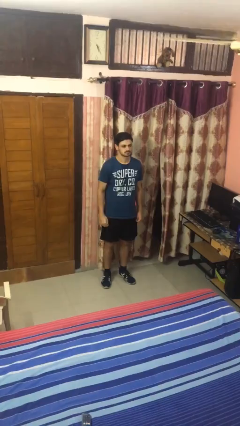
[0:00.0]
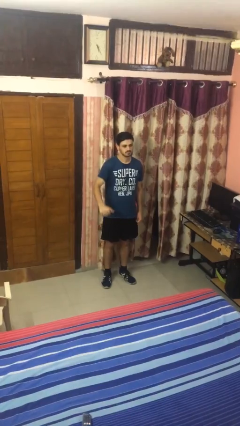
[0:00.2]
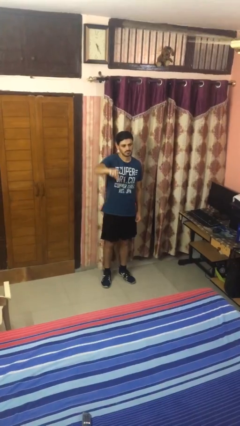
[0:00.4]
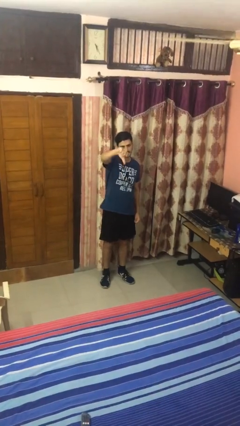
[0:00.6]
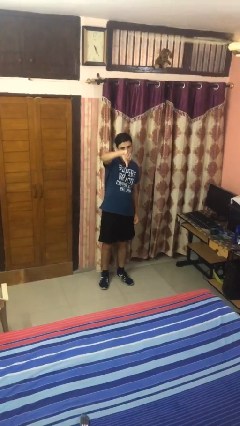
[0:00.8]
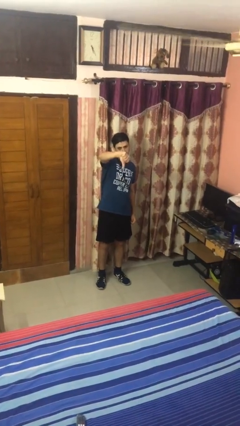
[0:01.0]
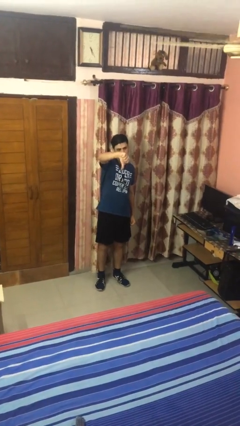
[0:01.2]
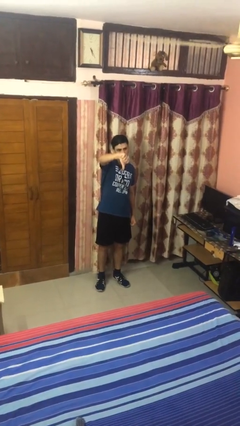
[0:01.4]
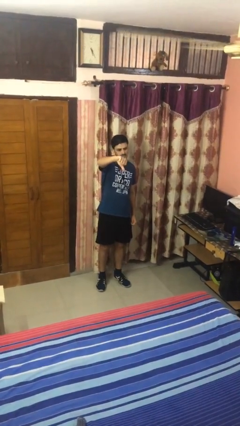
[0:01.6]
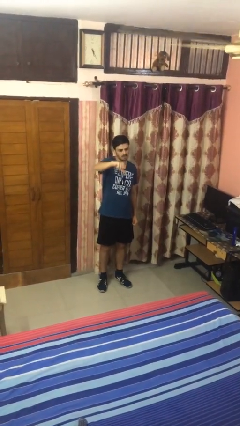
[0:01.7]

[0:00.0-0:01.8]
person gestures thumbs down

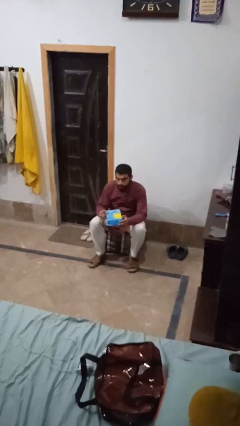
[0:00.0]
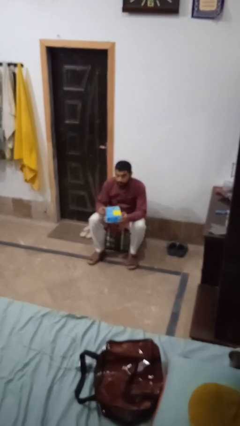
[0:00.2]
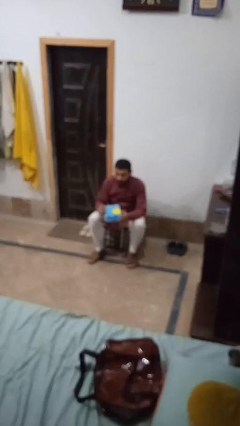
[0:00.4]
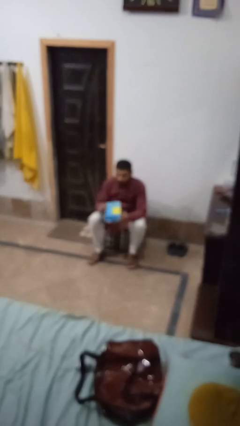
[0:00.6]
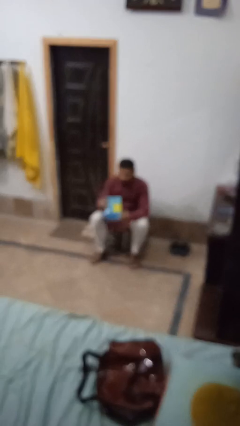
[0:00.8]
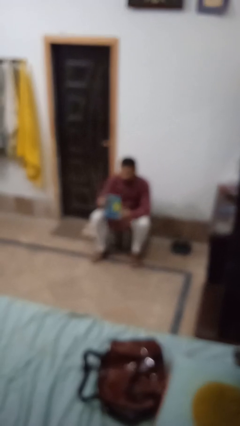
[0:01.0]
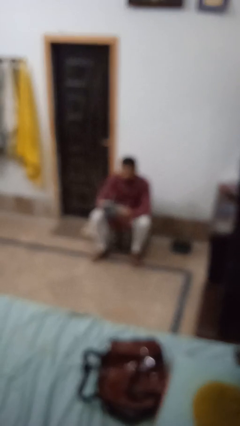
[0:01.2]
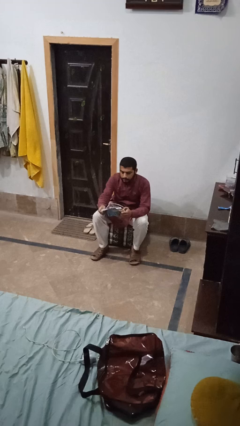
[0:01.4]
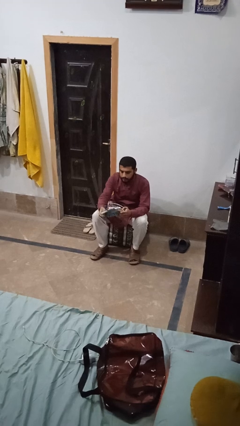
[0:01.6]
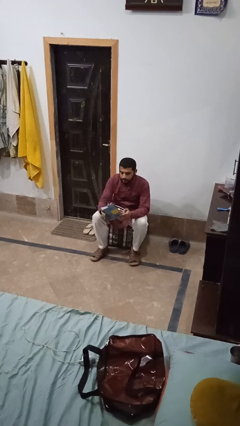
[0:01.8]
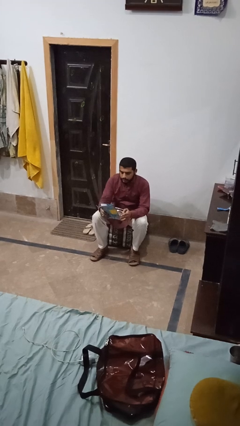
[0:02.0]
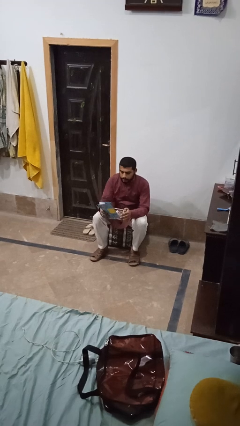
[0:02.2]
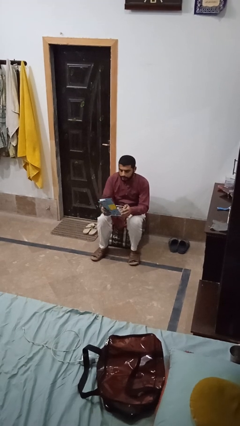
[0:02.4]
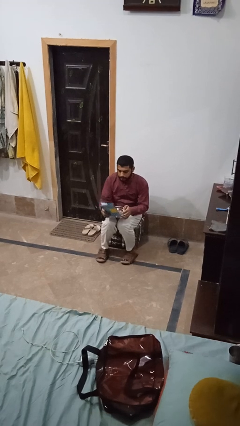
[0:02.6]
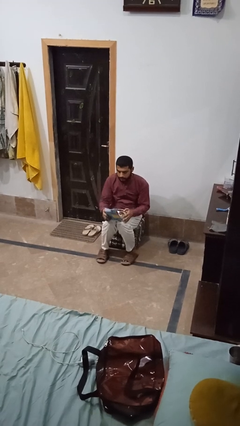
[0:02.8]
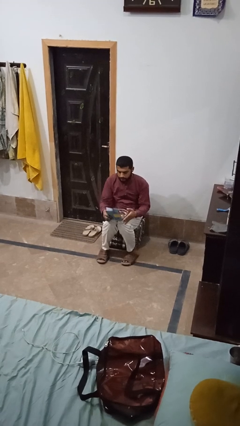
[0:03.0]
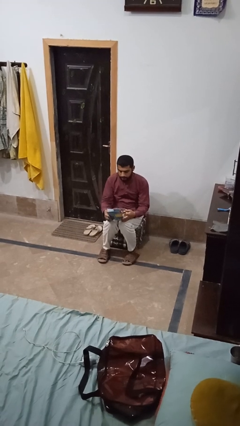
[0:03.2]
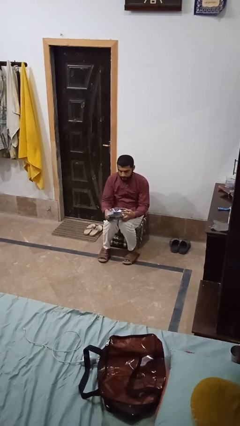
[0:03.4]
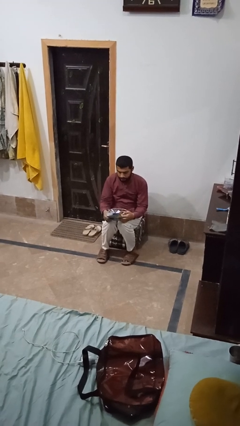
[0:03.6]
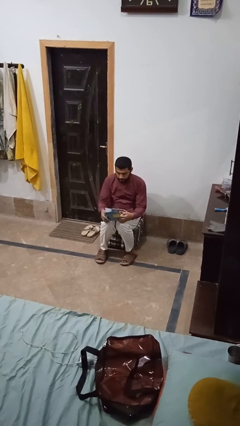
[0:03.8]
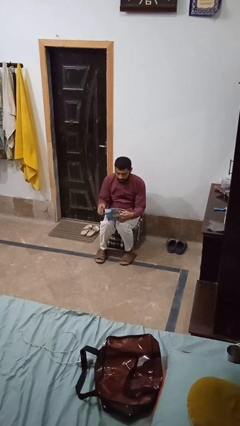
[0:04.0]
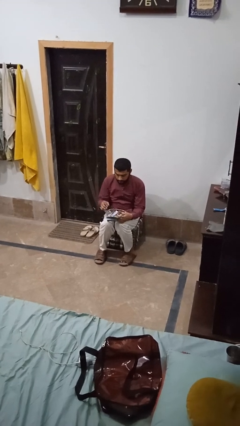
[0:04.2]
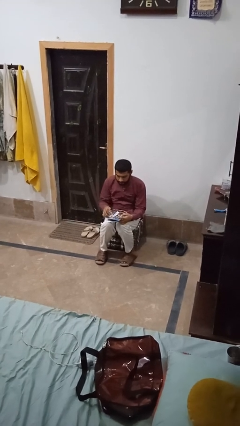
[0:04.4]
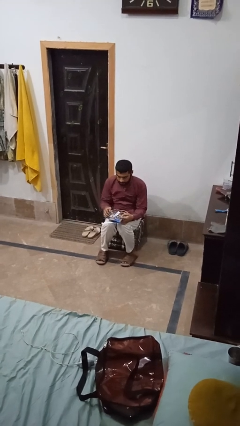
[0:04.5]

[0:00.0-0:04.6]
person opens jewelry box

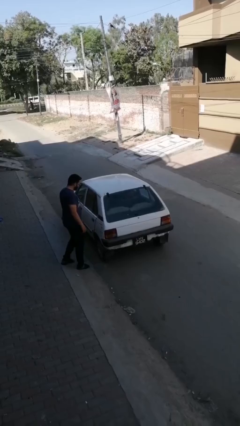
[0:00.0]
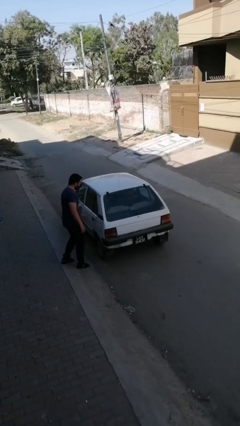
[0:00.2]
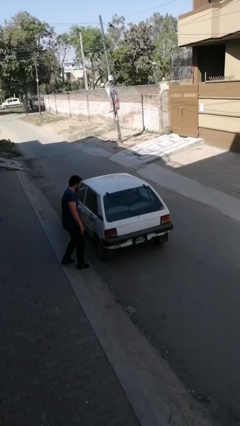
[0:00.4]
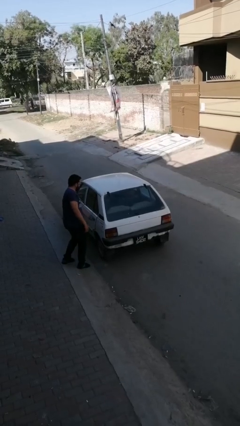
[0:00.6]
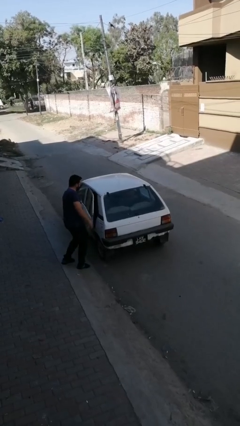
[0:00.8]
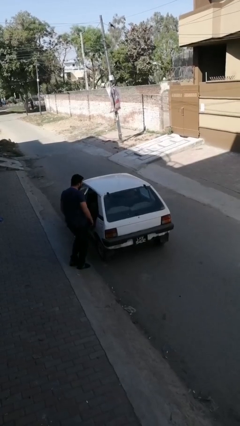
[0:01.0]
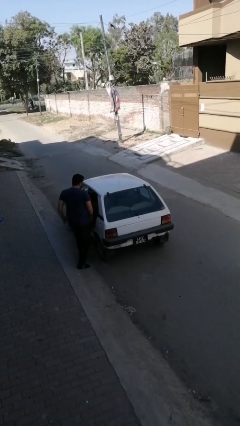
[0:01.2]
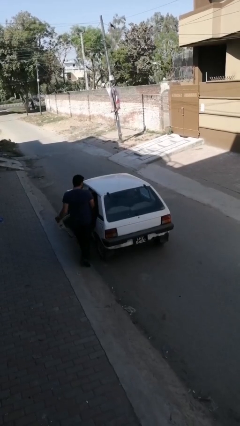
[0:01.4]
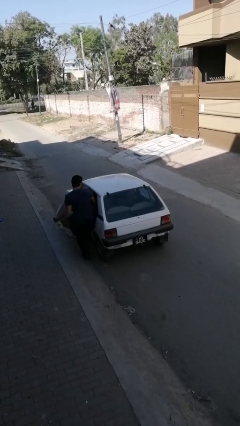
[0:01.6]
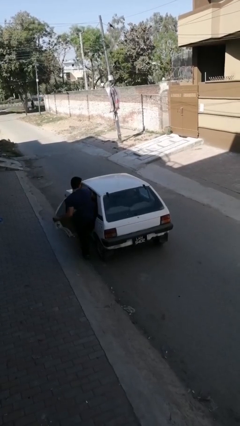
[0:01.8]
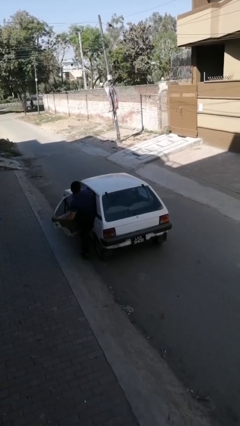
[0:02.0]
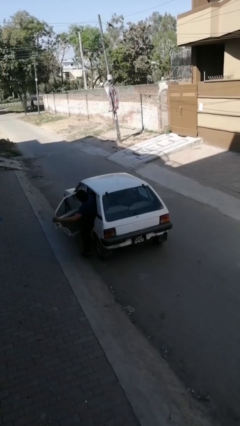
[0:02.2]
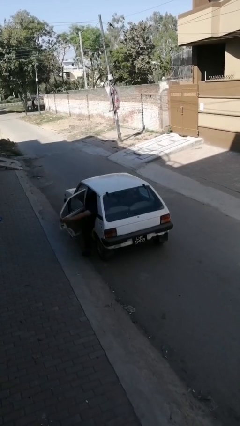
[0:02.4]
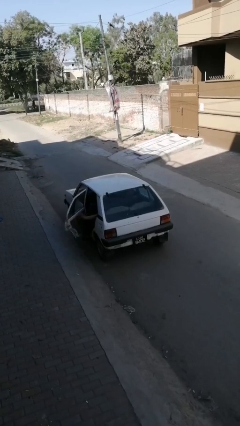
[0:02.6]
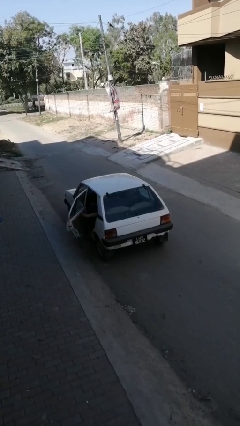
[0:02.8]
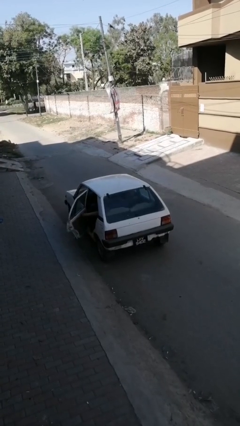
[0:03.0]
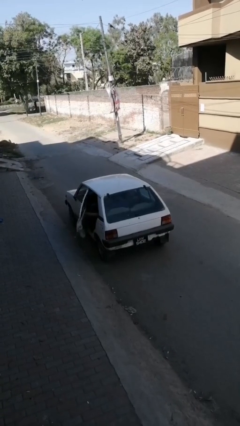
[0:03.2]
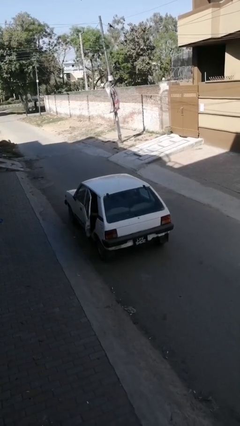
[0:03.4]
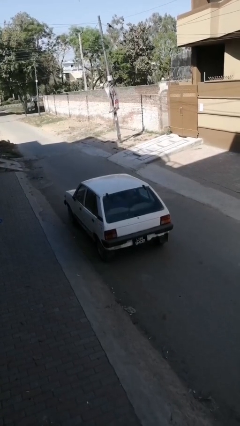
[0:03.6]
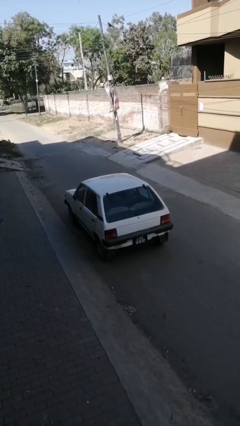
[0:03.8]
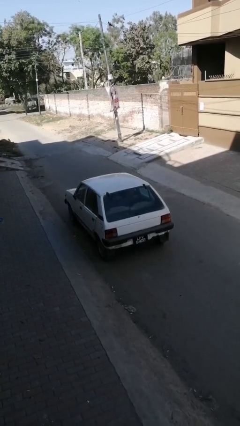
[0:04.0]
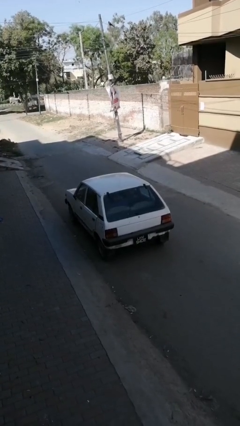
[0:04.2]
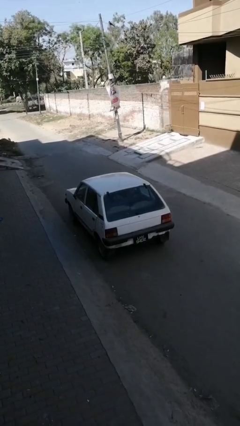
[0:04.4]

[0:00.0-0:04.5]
car picks up person

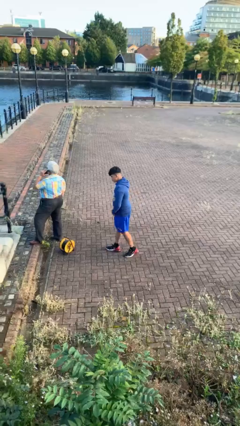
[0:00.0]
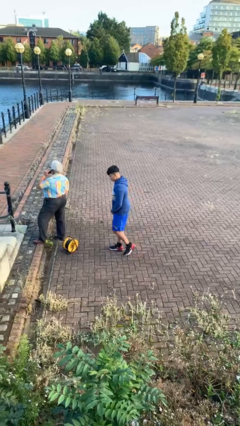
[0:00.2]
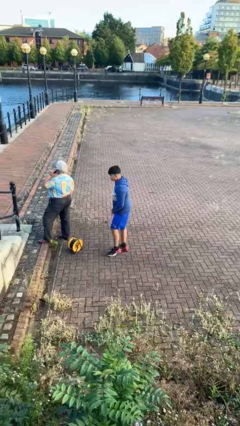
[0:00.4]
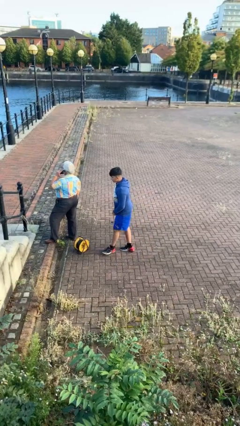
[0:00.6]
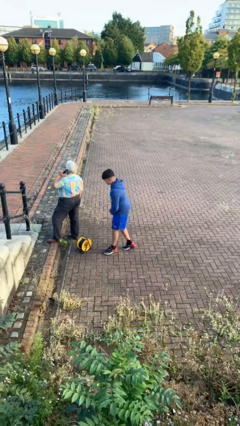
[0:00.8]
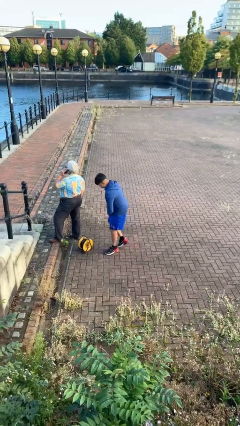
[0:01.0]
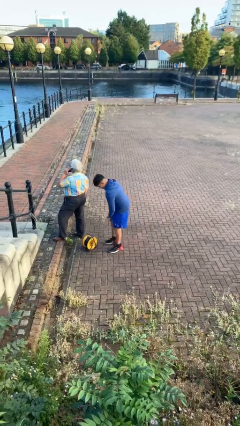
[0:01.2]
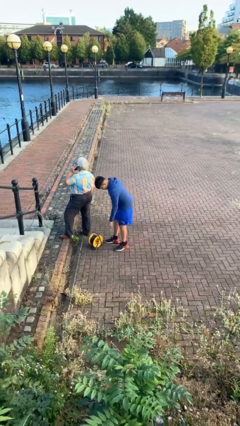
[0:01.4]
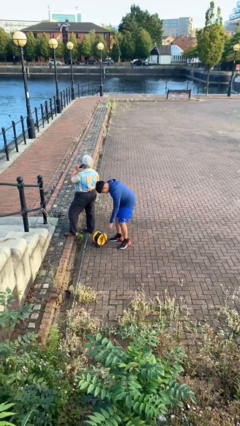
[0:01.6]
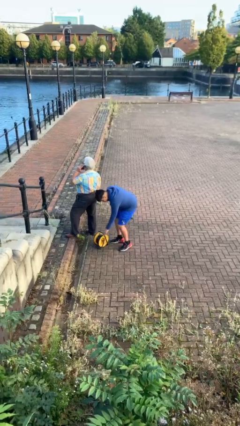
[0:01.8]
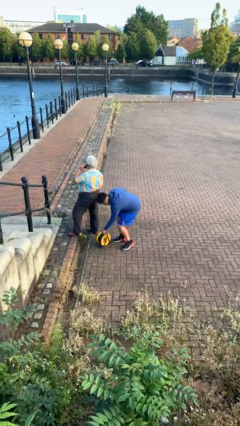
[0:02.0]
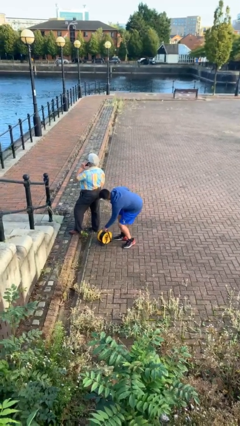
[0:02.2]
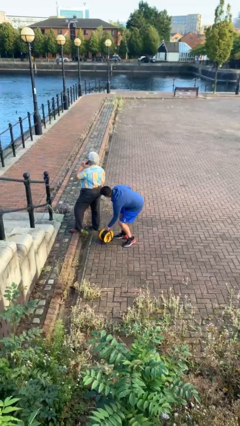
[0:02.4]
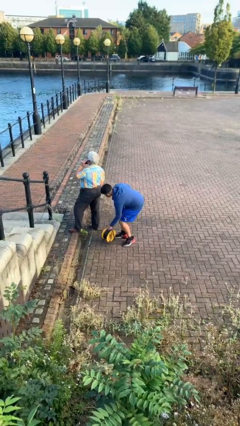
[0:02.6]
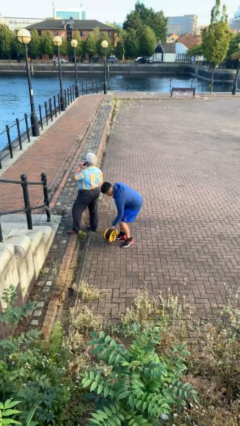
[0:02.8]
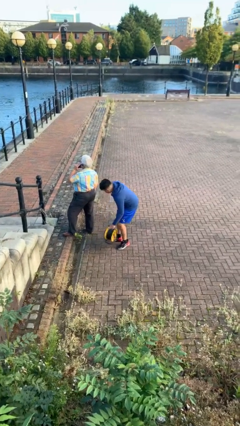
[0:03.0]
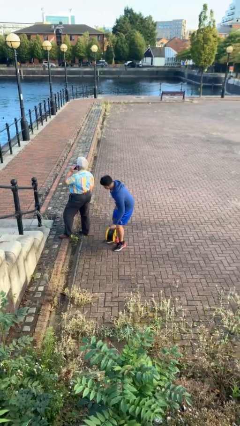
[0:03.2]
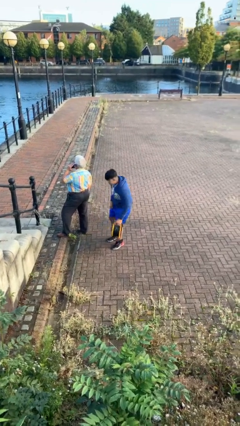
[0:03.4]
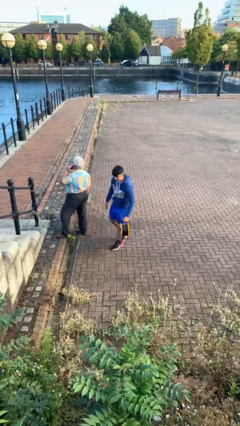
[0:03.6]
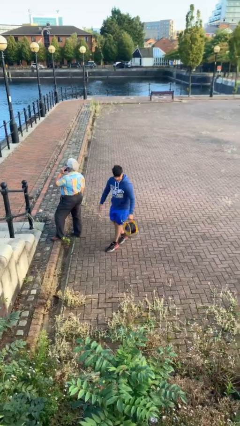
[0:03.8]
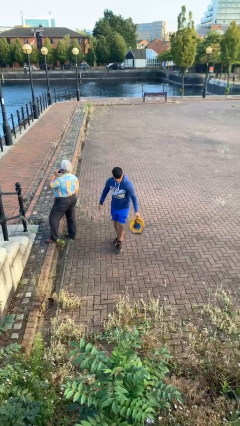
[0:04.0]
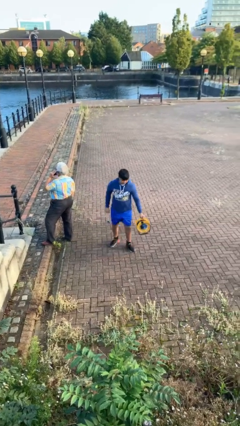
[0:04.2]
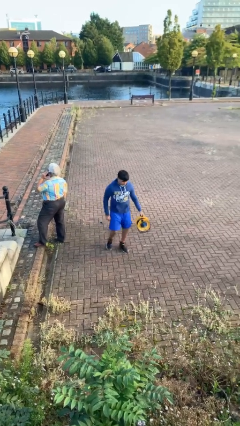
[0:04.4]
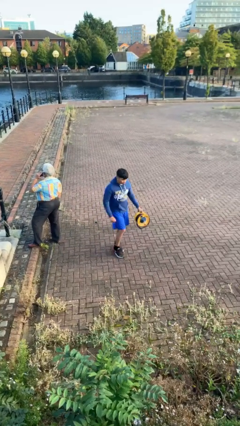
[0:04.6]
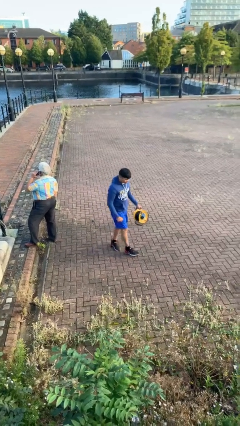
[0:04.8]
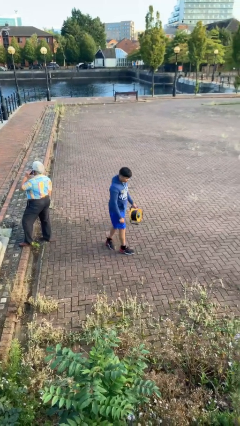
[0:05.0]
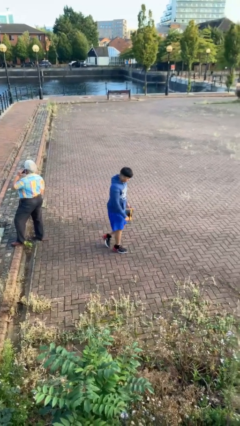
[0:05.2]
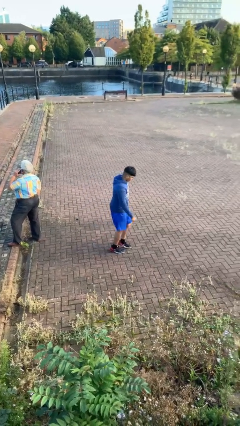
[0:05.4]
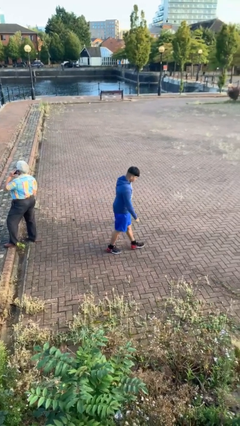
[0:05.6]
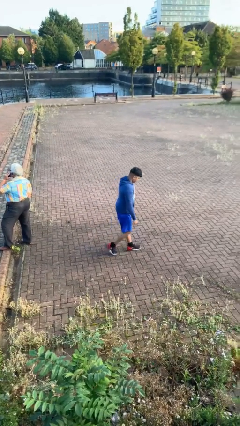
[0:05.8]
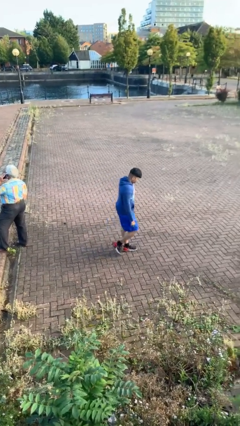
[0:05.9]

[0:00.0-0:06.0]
person steals object from person

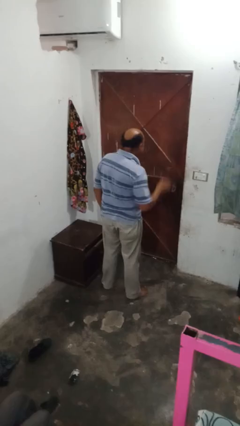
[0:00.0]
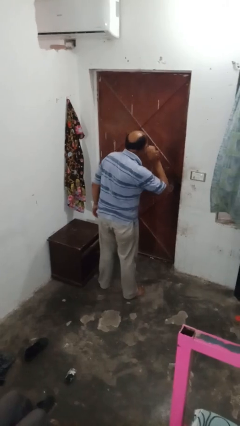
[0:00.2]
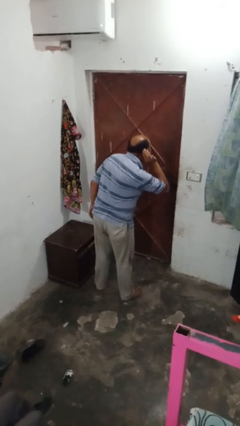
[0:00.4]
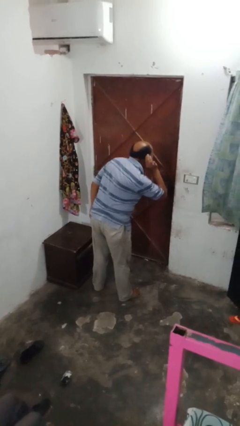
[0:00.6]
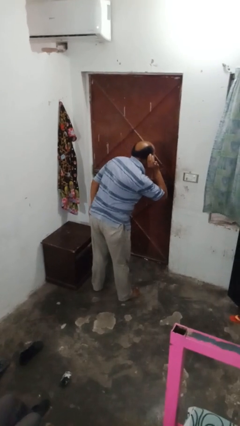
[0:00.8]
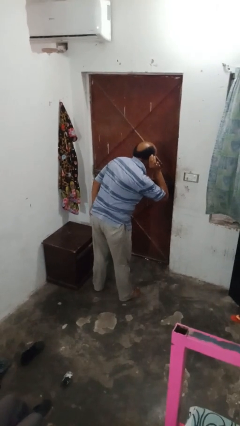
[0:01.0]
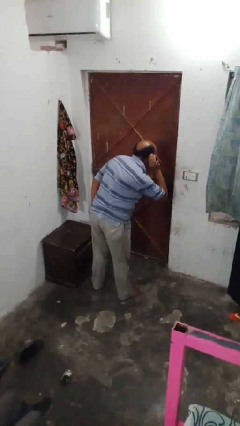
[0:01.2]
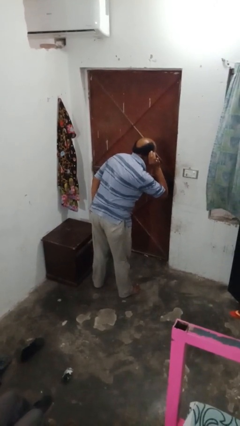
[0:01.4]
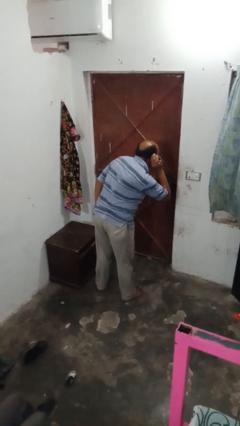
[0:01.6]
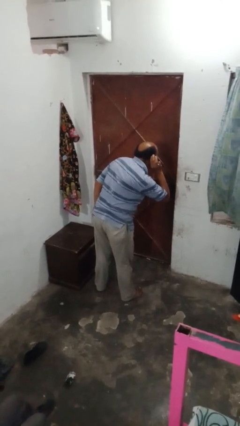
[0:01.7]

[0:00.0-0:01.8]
person gestures listen closely
